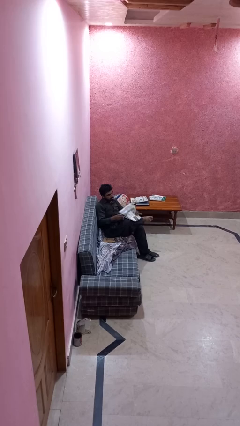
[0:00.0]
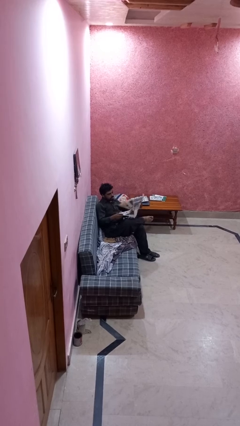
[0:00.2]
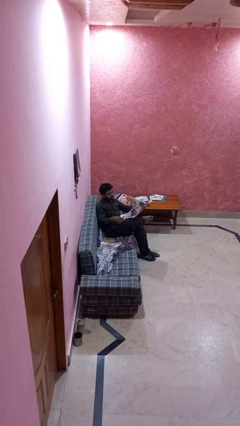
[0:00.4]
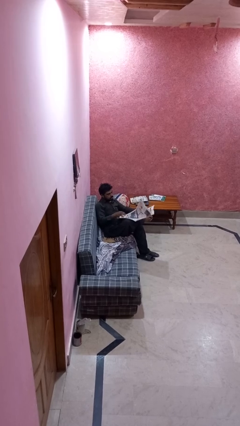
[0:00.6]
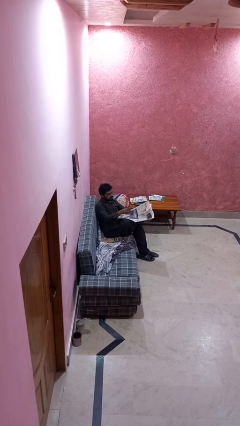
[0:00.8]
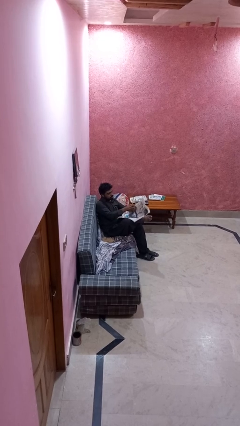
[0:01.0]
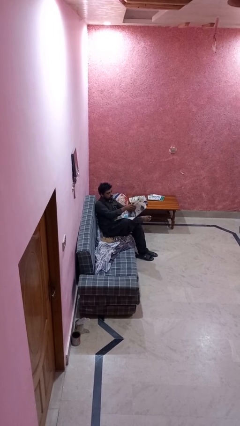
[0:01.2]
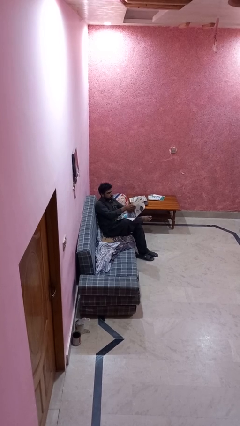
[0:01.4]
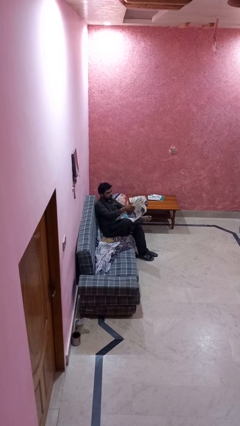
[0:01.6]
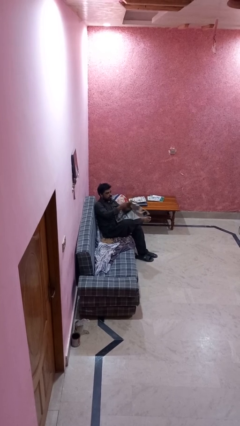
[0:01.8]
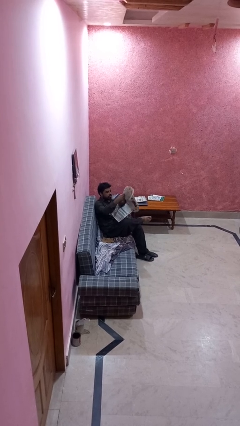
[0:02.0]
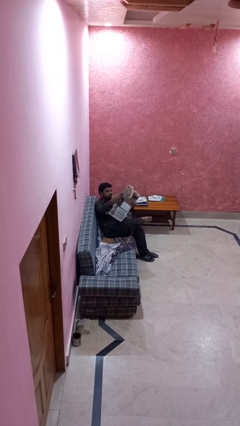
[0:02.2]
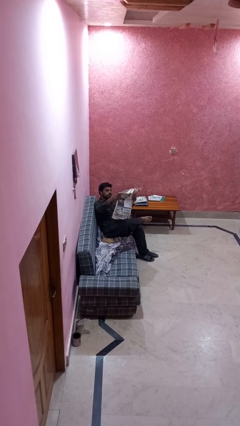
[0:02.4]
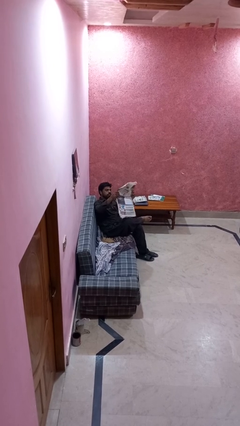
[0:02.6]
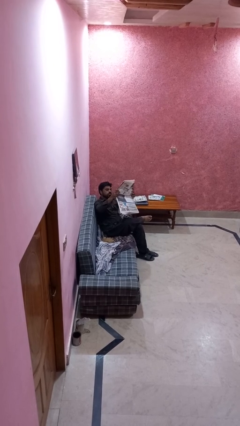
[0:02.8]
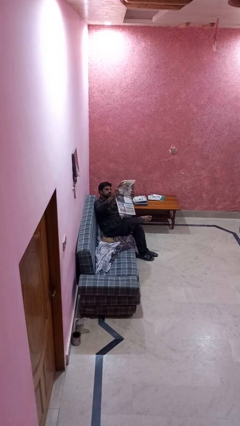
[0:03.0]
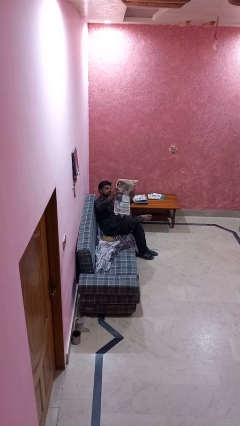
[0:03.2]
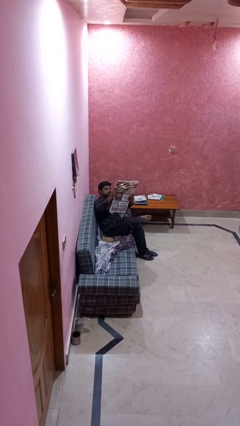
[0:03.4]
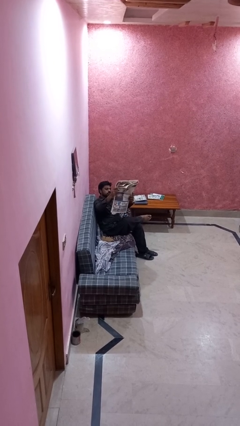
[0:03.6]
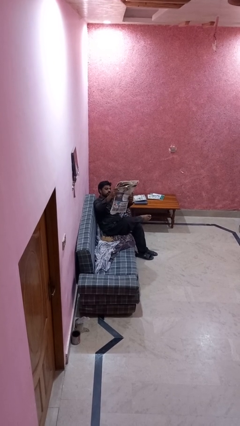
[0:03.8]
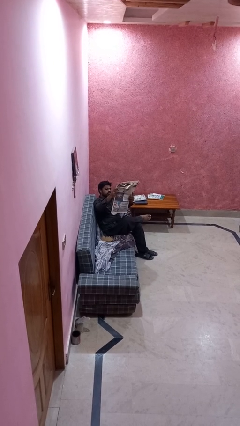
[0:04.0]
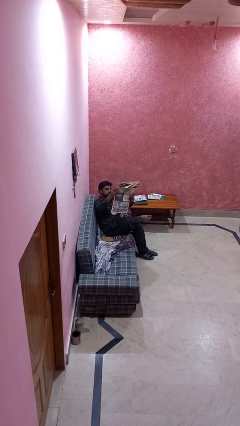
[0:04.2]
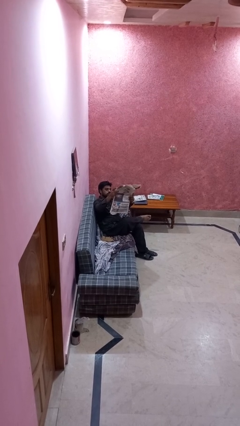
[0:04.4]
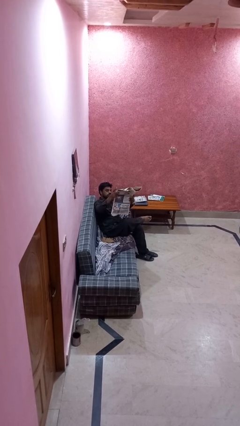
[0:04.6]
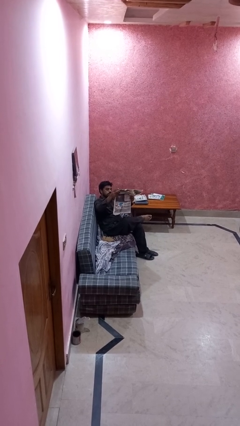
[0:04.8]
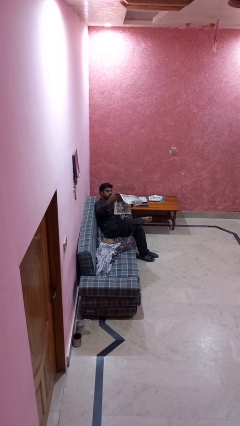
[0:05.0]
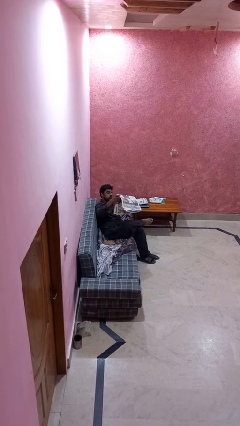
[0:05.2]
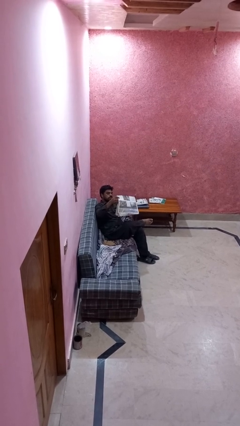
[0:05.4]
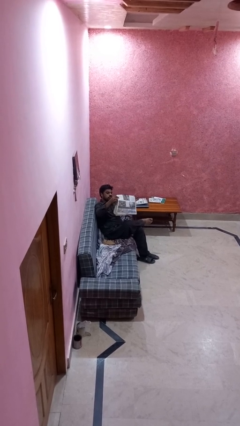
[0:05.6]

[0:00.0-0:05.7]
person reads newspaper

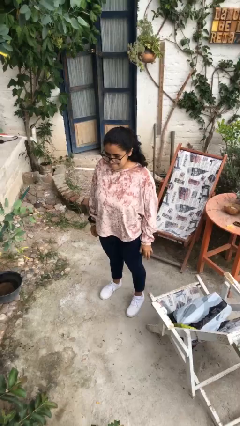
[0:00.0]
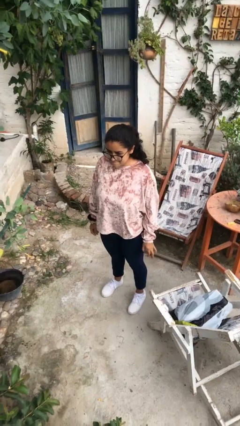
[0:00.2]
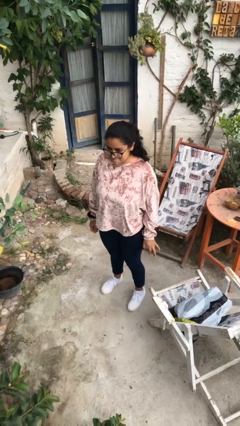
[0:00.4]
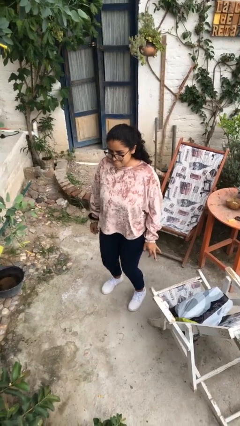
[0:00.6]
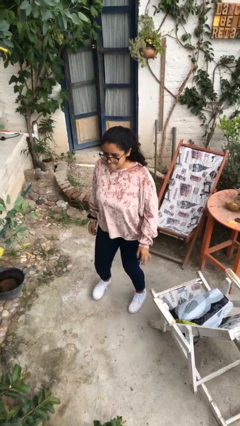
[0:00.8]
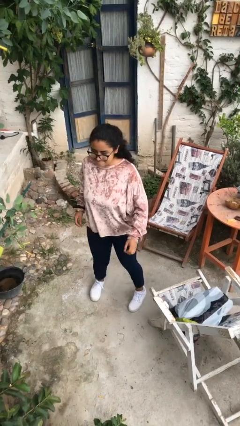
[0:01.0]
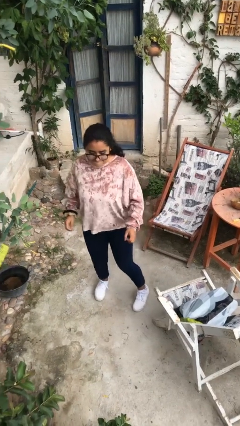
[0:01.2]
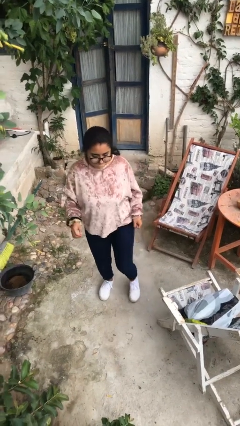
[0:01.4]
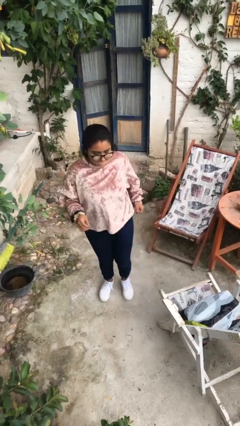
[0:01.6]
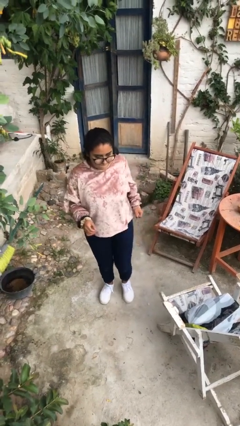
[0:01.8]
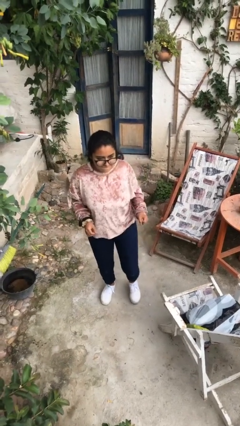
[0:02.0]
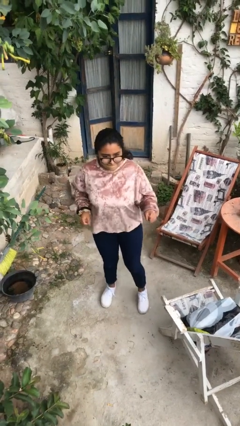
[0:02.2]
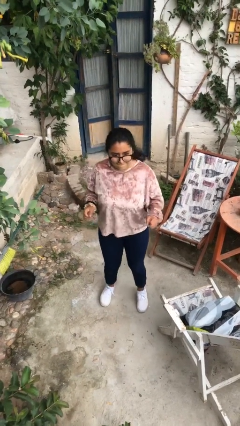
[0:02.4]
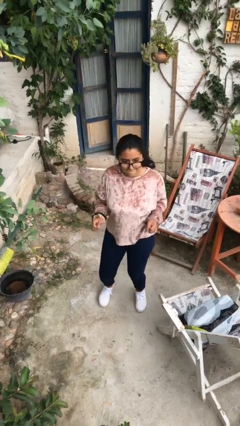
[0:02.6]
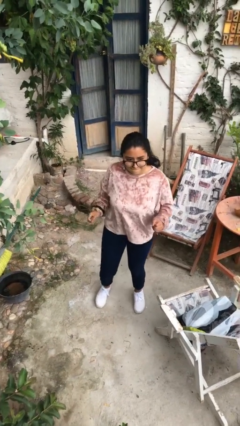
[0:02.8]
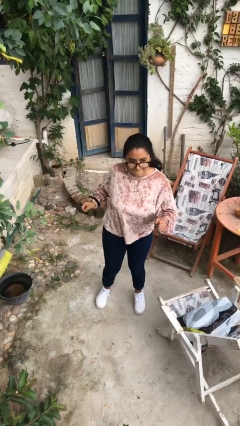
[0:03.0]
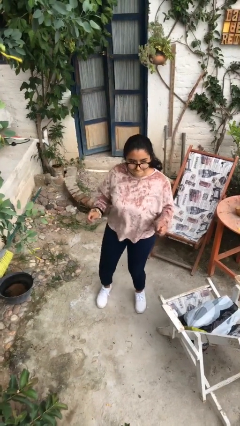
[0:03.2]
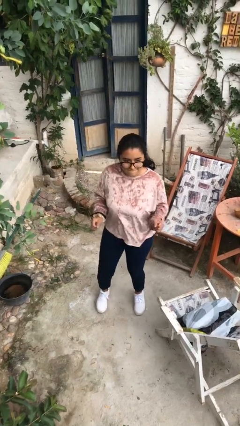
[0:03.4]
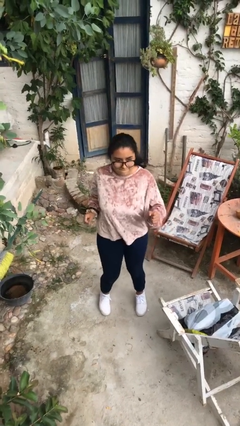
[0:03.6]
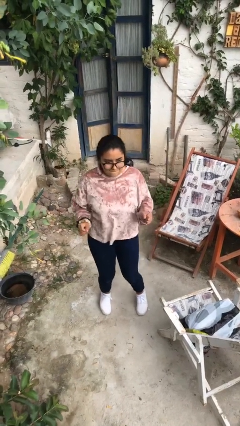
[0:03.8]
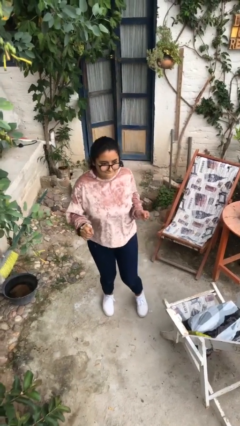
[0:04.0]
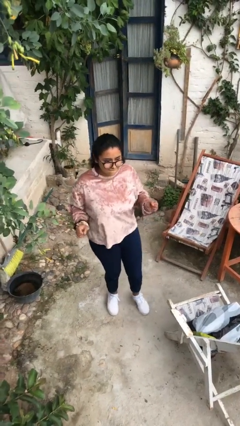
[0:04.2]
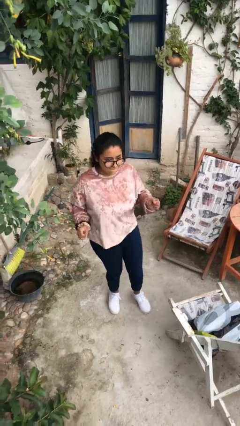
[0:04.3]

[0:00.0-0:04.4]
person dances in place

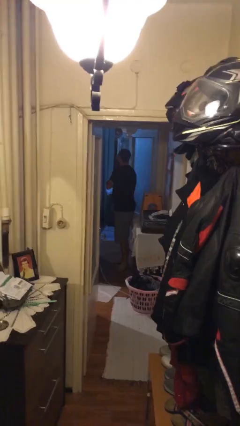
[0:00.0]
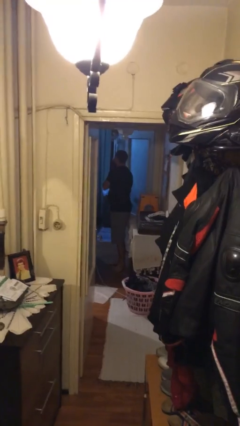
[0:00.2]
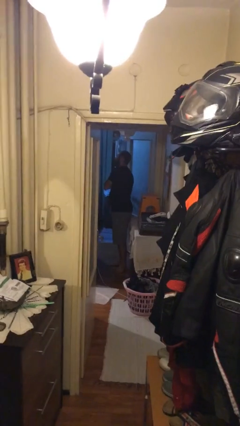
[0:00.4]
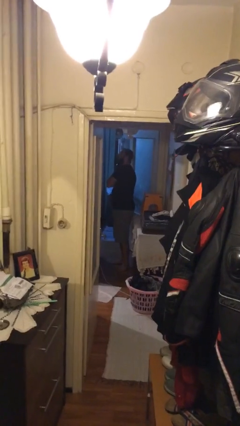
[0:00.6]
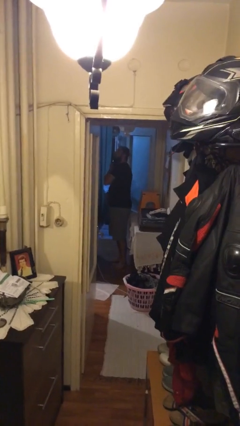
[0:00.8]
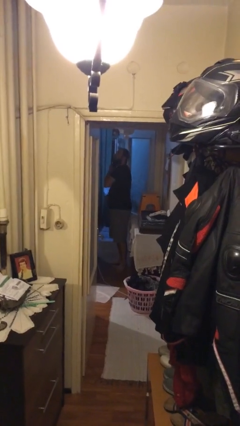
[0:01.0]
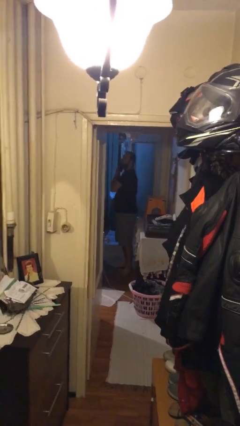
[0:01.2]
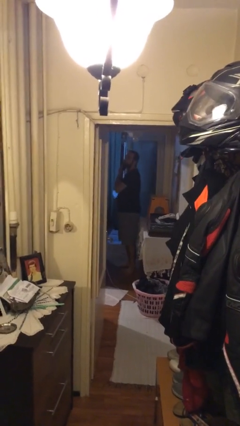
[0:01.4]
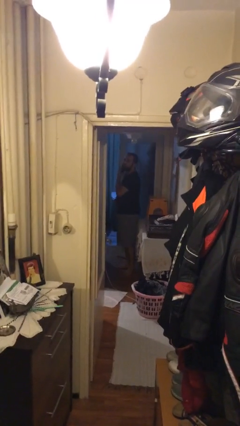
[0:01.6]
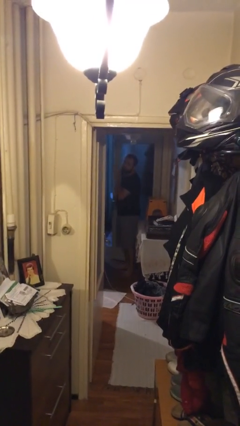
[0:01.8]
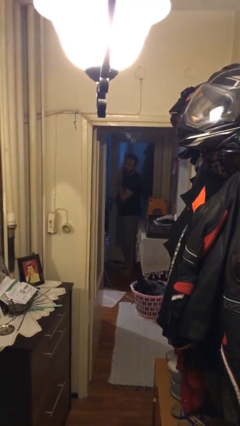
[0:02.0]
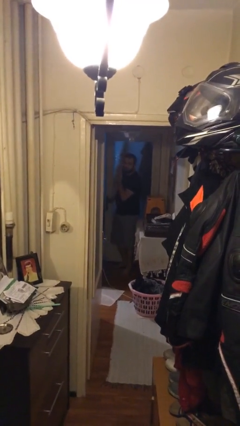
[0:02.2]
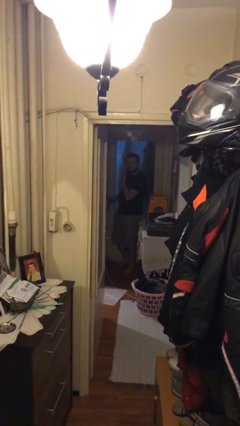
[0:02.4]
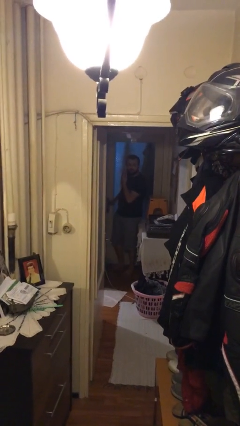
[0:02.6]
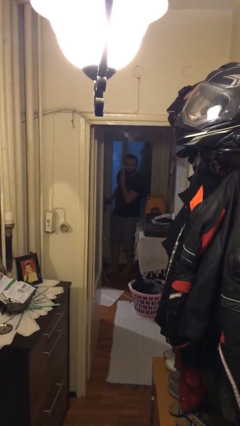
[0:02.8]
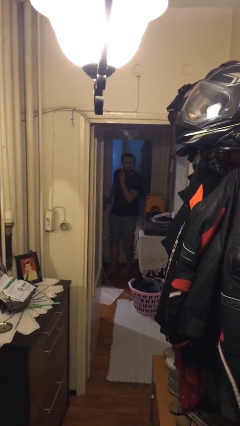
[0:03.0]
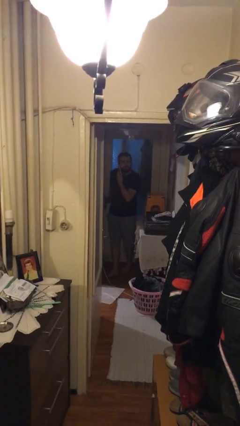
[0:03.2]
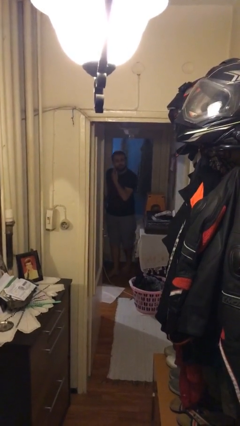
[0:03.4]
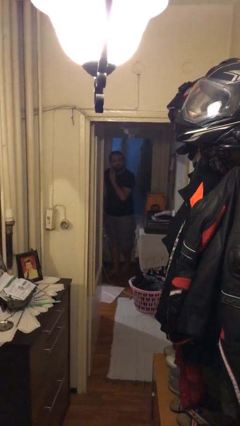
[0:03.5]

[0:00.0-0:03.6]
person closes facility door

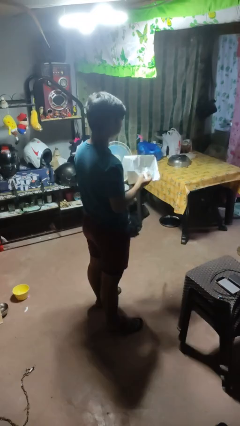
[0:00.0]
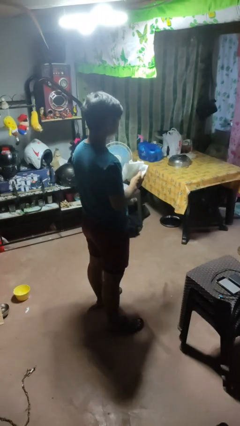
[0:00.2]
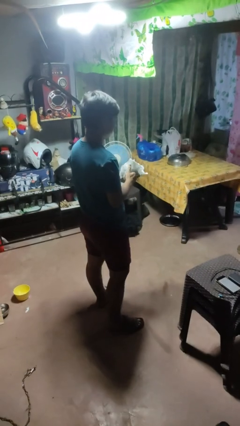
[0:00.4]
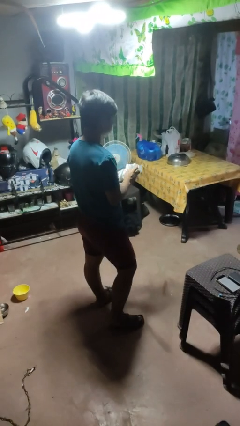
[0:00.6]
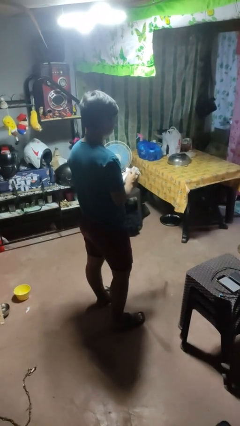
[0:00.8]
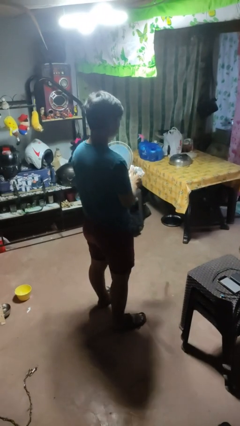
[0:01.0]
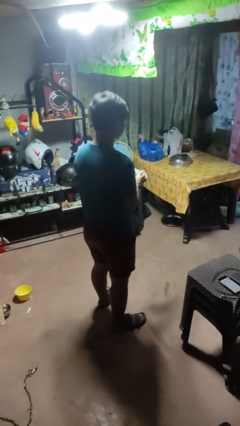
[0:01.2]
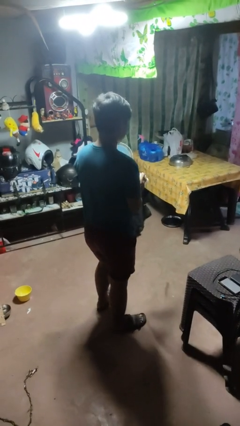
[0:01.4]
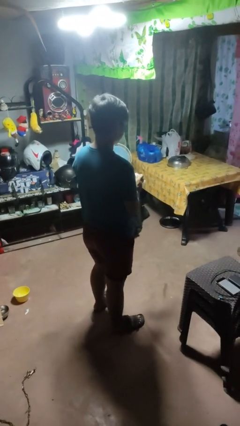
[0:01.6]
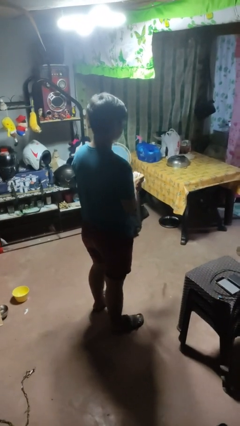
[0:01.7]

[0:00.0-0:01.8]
person crumples paper

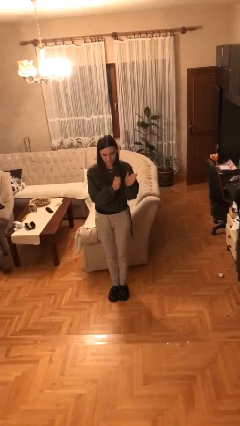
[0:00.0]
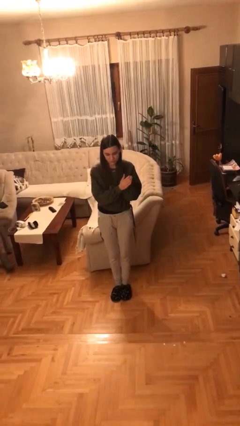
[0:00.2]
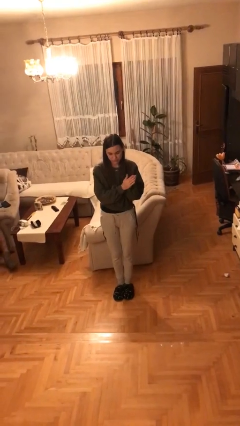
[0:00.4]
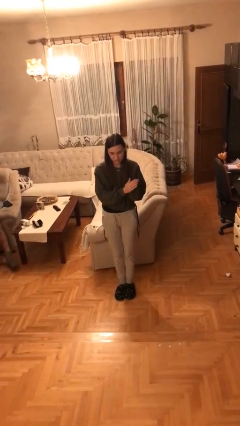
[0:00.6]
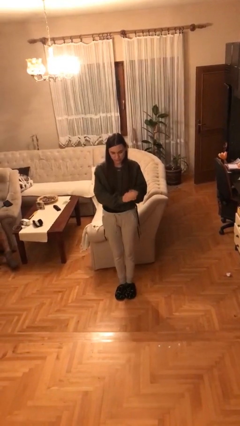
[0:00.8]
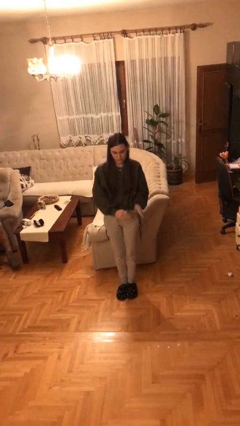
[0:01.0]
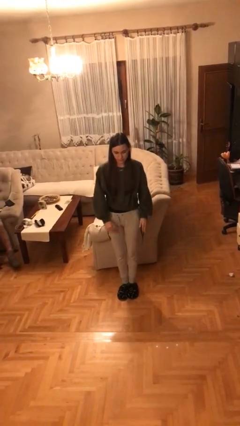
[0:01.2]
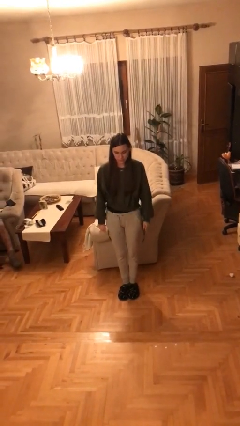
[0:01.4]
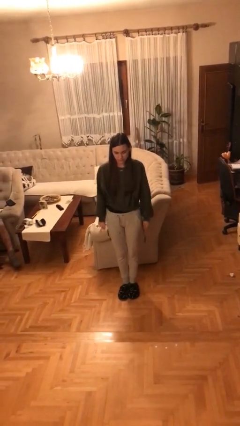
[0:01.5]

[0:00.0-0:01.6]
person claps hands

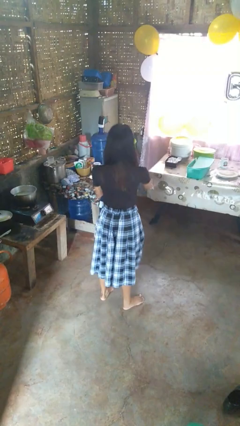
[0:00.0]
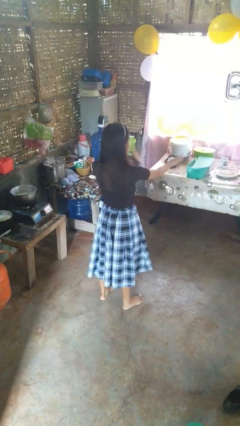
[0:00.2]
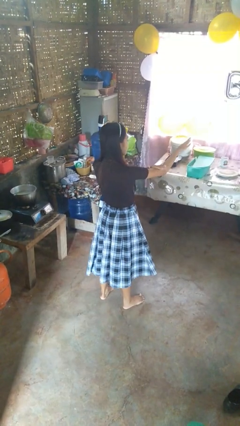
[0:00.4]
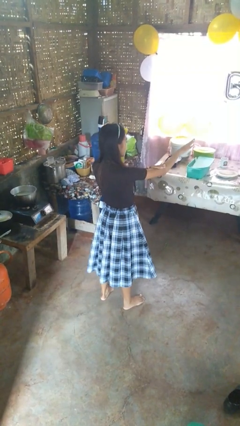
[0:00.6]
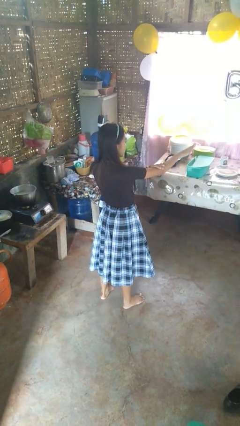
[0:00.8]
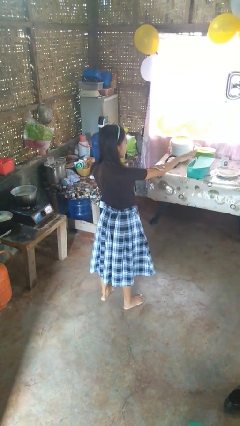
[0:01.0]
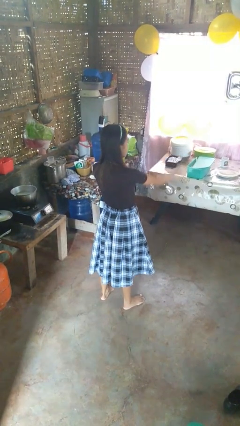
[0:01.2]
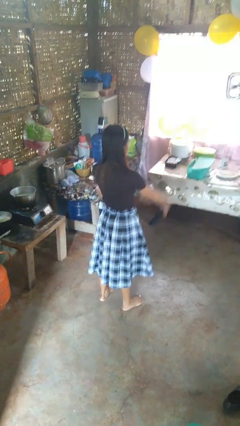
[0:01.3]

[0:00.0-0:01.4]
person swats bug
